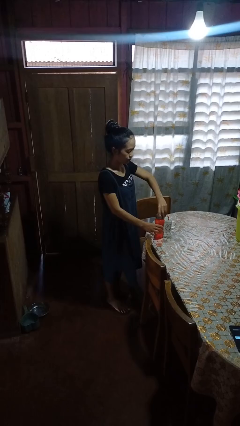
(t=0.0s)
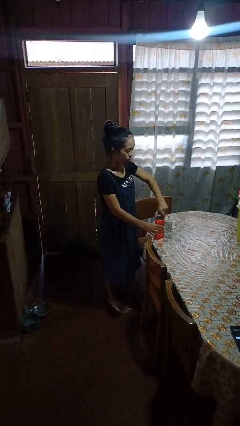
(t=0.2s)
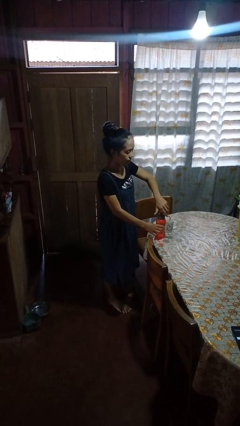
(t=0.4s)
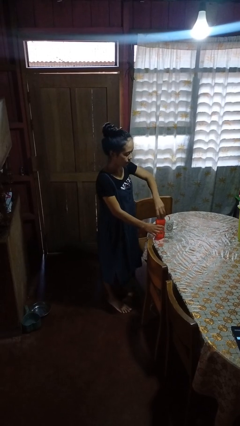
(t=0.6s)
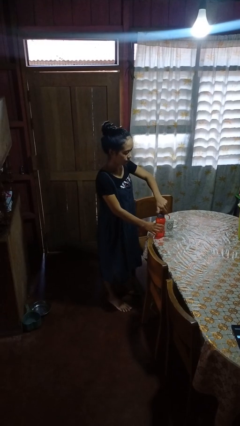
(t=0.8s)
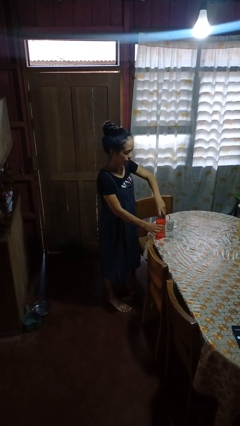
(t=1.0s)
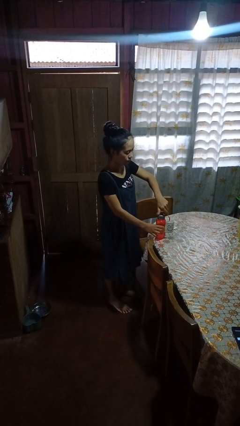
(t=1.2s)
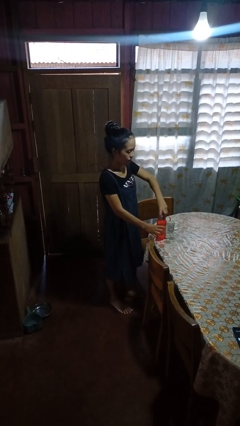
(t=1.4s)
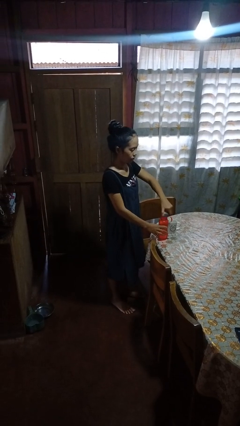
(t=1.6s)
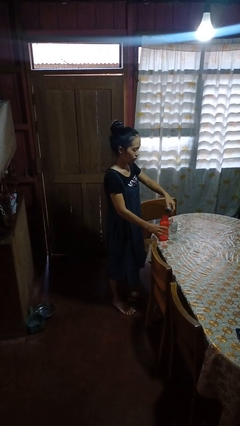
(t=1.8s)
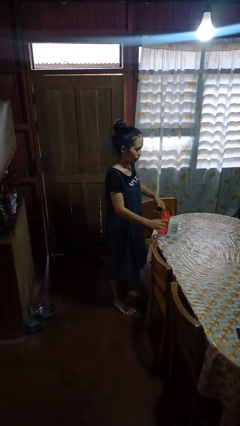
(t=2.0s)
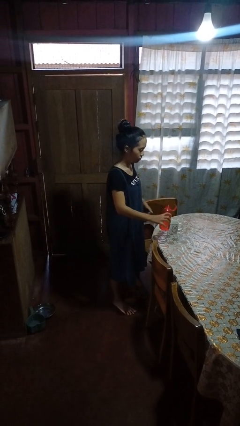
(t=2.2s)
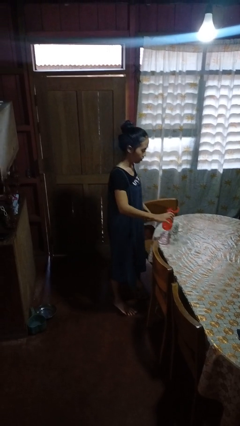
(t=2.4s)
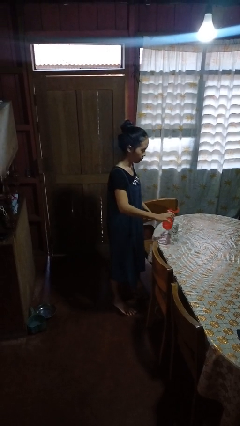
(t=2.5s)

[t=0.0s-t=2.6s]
person unscrews lid from bottle

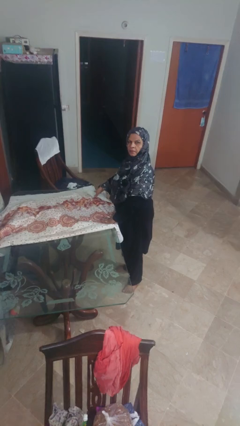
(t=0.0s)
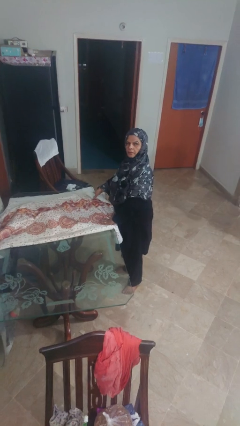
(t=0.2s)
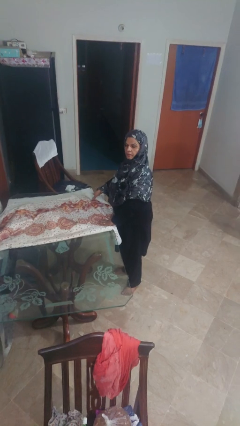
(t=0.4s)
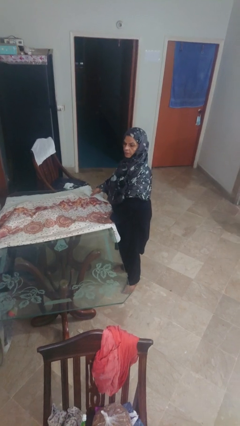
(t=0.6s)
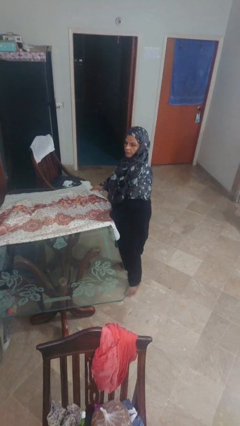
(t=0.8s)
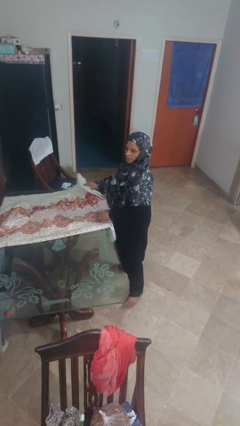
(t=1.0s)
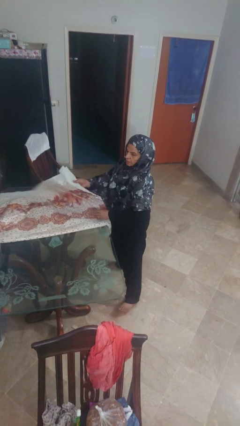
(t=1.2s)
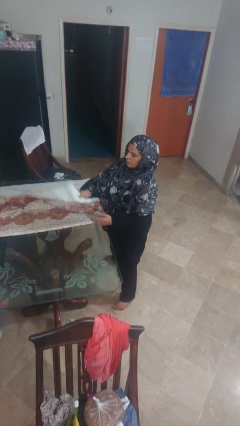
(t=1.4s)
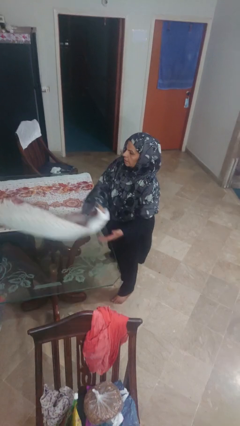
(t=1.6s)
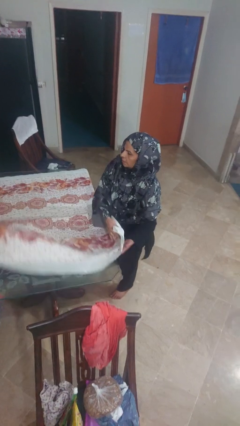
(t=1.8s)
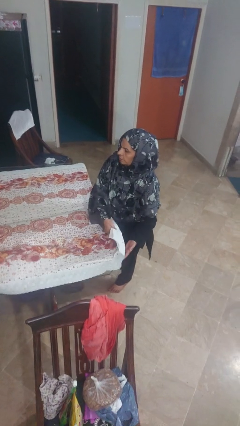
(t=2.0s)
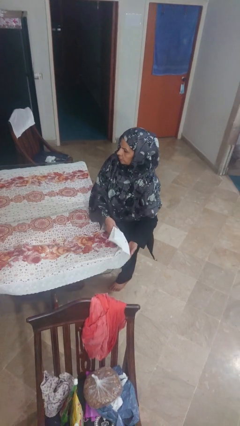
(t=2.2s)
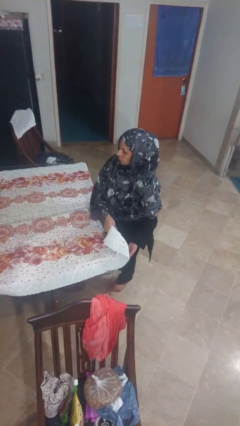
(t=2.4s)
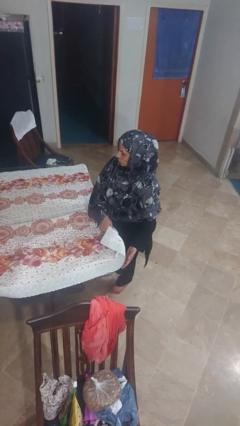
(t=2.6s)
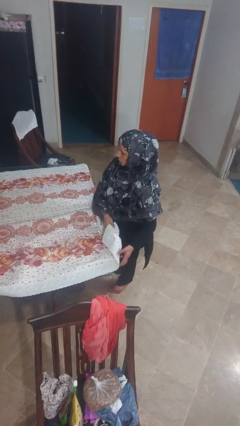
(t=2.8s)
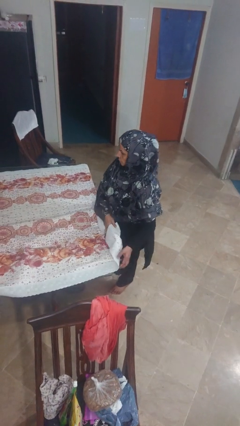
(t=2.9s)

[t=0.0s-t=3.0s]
person spreads tablecloth

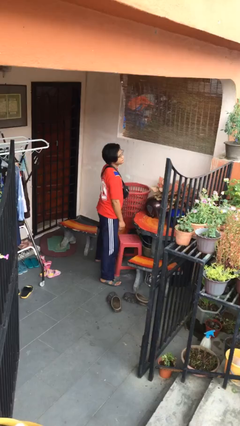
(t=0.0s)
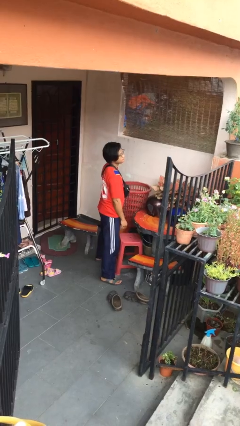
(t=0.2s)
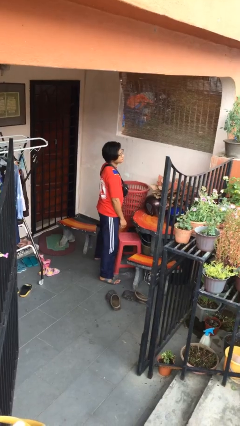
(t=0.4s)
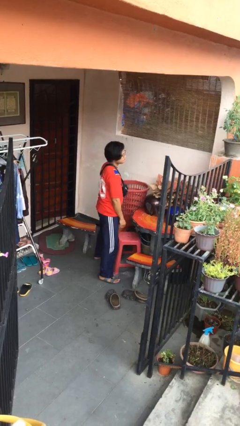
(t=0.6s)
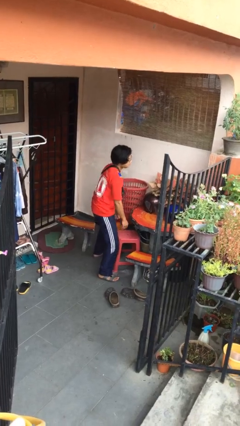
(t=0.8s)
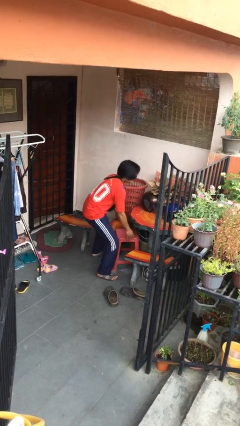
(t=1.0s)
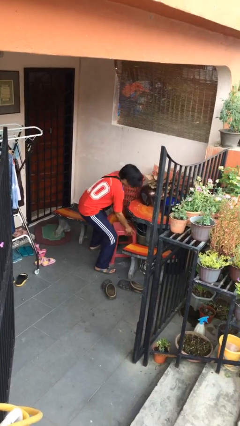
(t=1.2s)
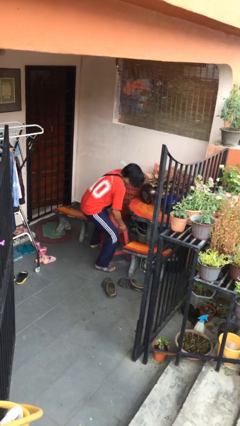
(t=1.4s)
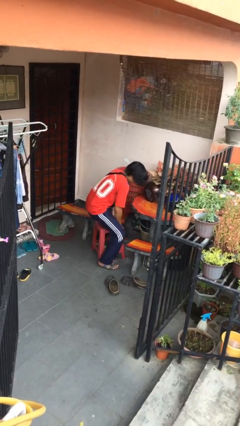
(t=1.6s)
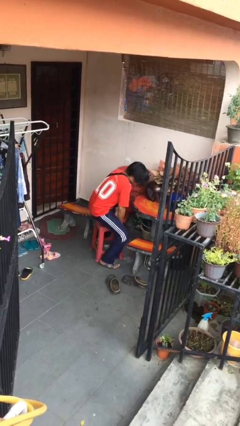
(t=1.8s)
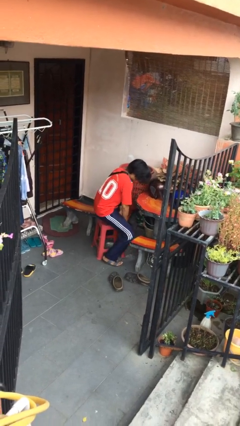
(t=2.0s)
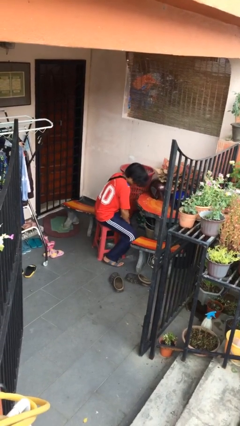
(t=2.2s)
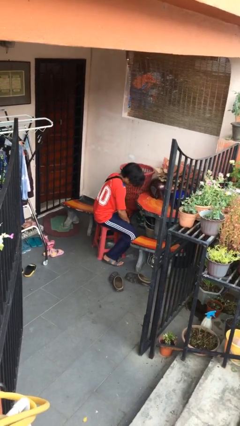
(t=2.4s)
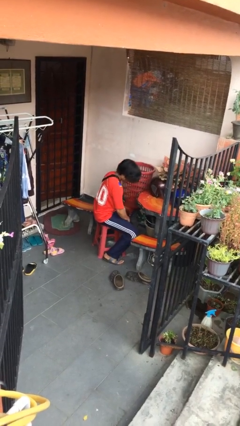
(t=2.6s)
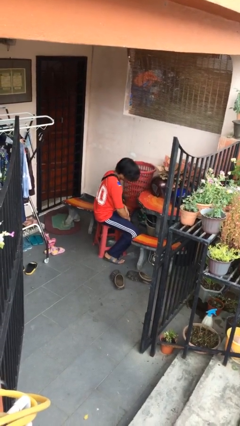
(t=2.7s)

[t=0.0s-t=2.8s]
person sits down

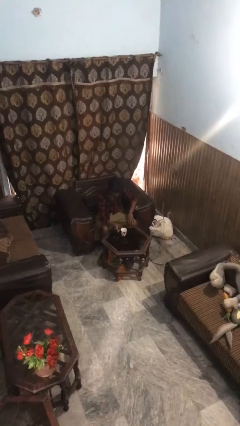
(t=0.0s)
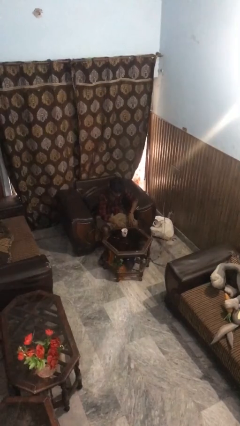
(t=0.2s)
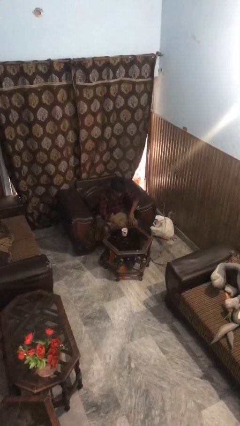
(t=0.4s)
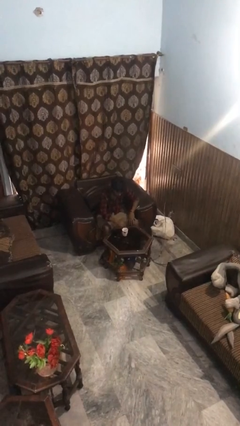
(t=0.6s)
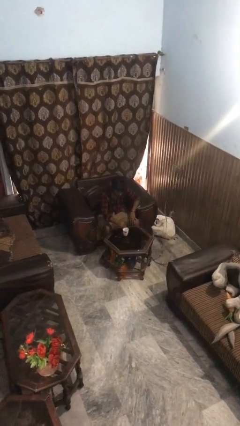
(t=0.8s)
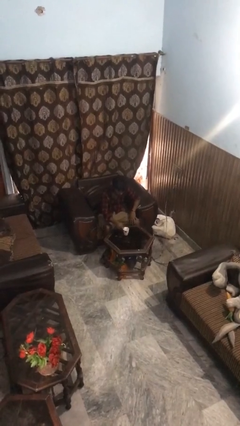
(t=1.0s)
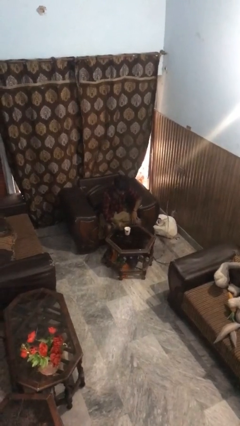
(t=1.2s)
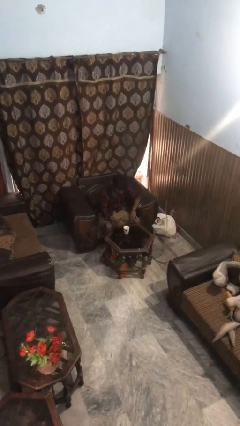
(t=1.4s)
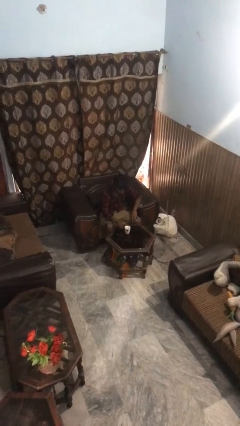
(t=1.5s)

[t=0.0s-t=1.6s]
person stirs mug

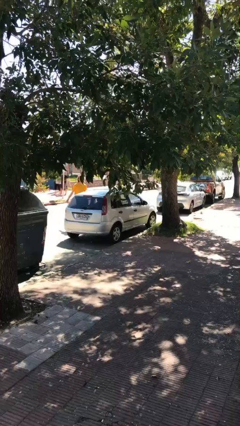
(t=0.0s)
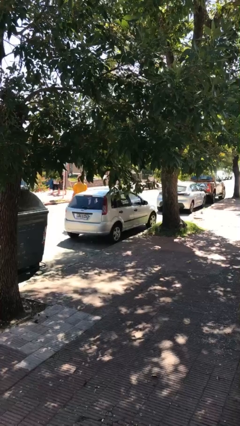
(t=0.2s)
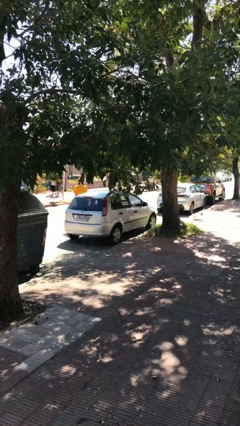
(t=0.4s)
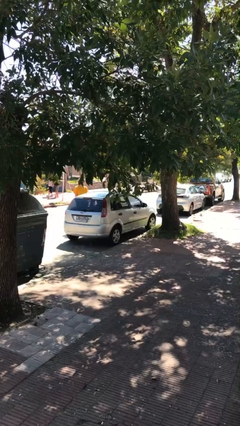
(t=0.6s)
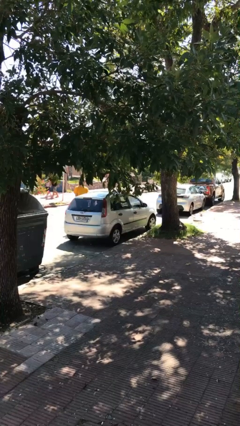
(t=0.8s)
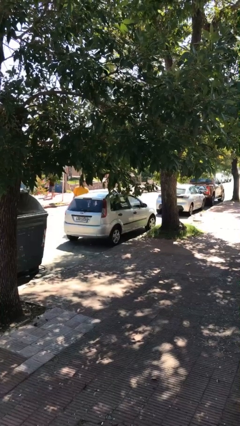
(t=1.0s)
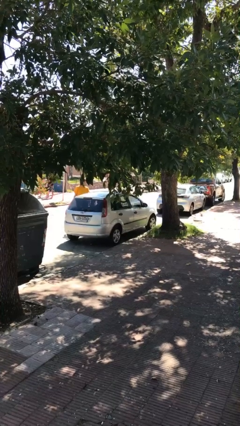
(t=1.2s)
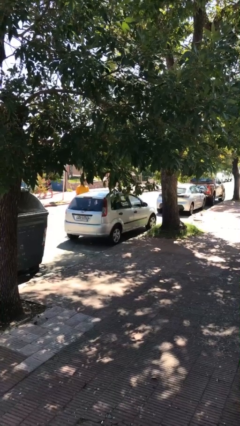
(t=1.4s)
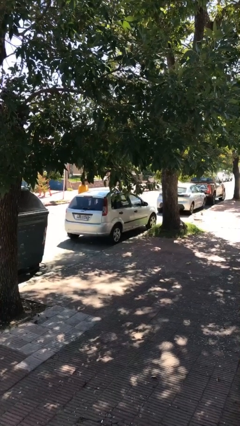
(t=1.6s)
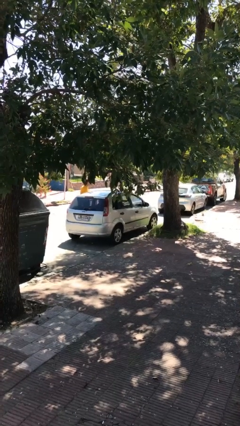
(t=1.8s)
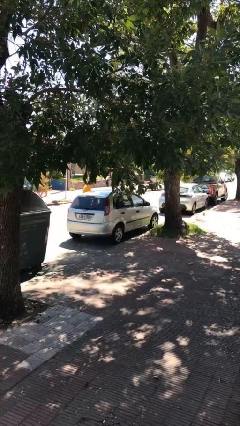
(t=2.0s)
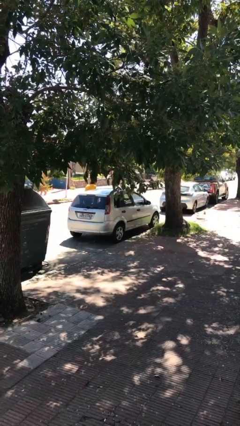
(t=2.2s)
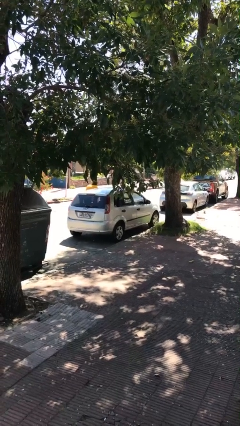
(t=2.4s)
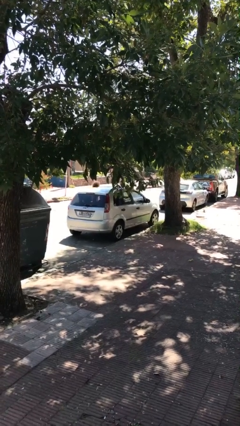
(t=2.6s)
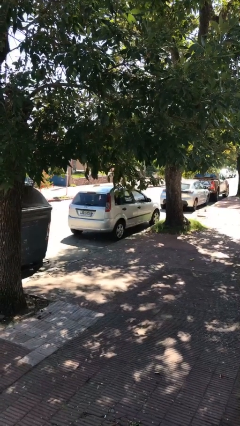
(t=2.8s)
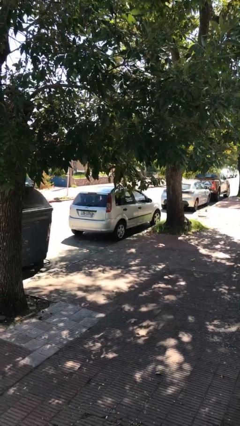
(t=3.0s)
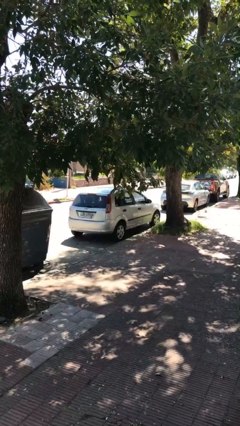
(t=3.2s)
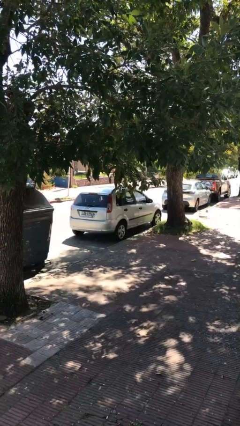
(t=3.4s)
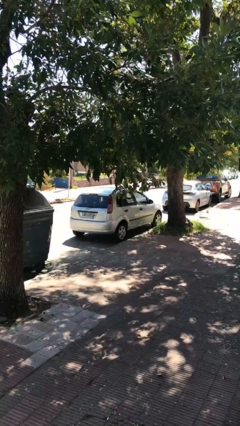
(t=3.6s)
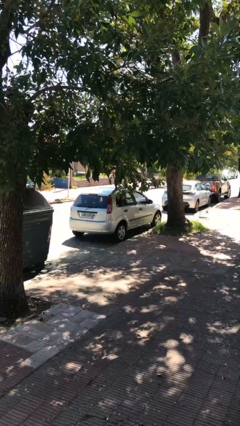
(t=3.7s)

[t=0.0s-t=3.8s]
car picks up person

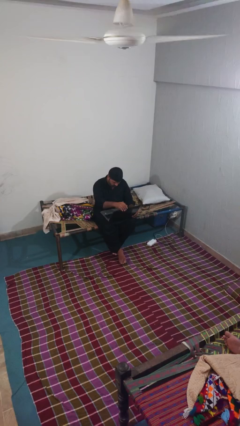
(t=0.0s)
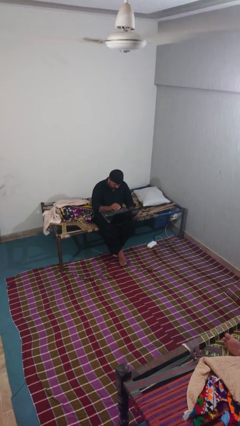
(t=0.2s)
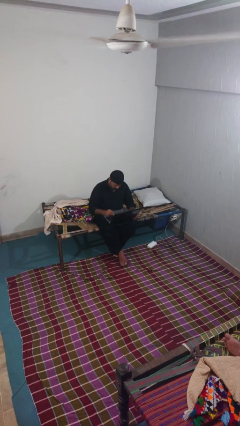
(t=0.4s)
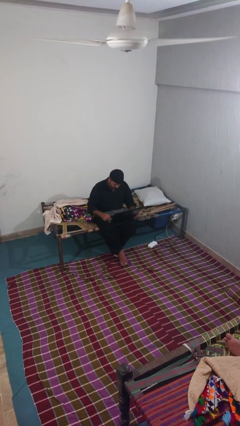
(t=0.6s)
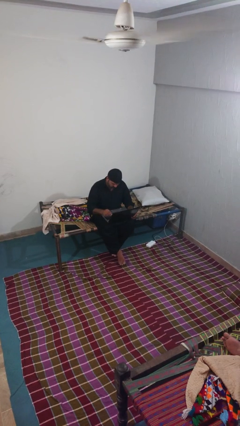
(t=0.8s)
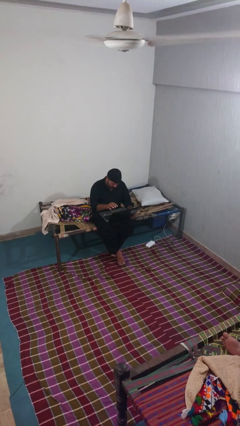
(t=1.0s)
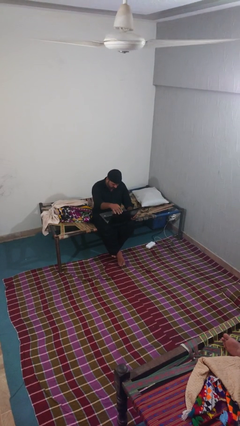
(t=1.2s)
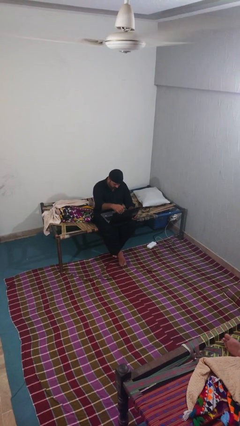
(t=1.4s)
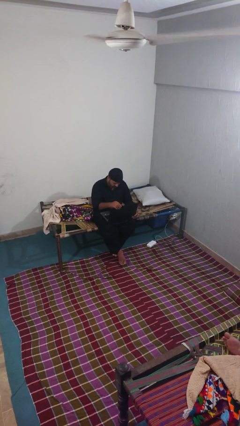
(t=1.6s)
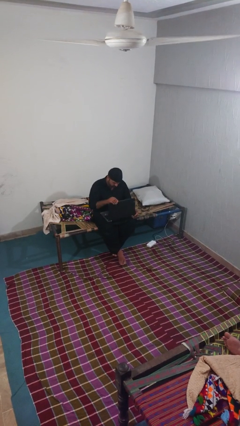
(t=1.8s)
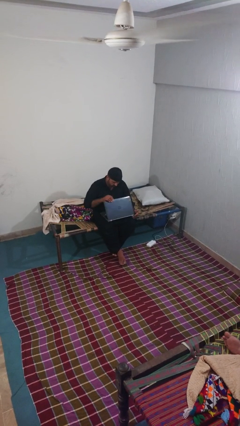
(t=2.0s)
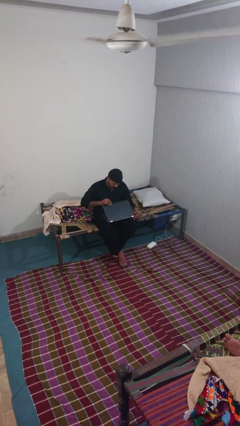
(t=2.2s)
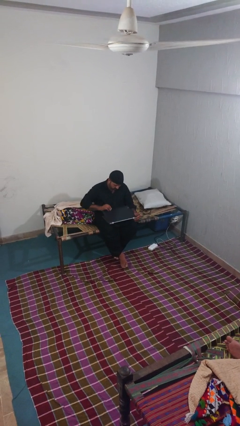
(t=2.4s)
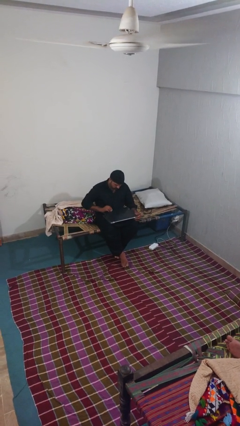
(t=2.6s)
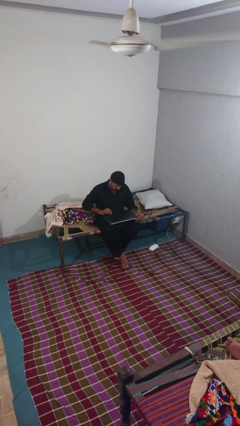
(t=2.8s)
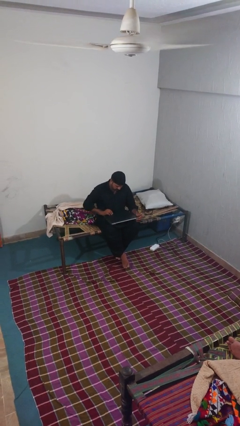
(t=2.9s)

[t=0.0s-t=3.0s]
person closes laptop

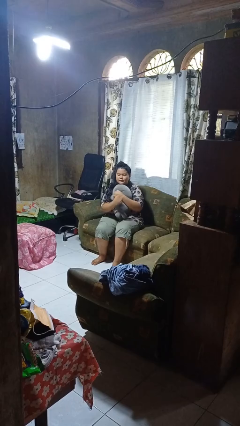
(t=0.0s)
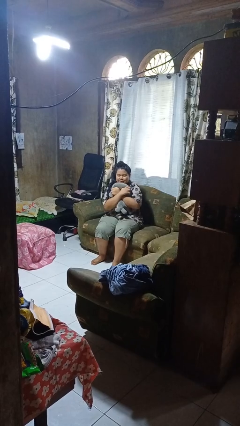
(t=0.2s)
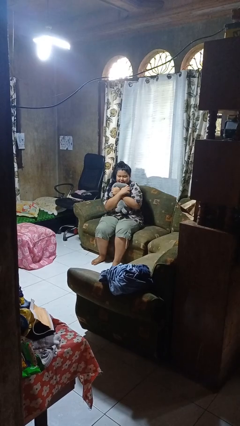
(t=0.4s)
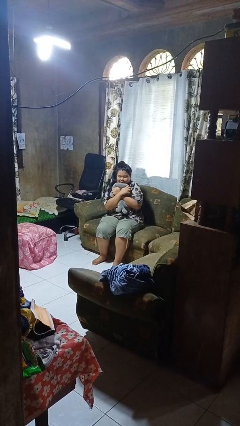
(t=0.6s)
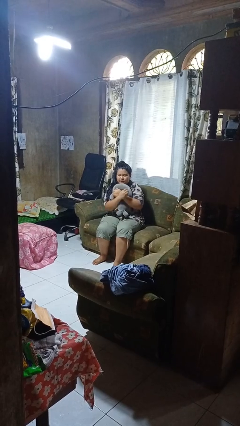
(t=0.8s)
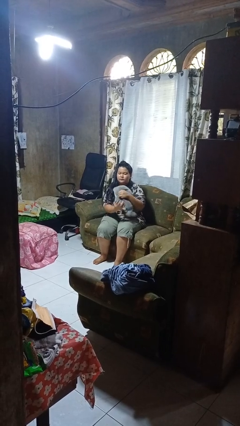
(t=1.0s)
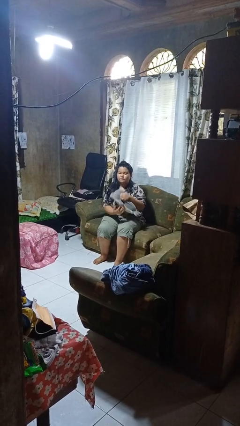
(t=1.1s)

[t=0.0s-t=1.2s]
person hugs stuffed animal
